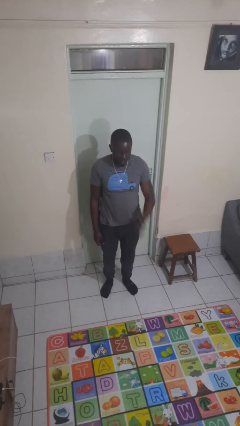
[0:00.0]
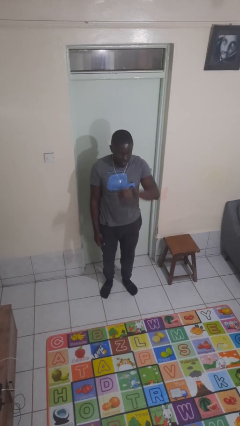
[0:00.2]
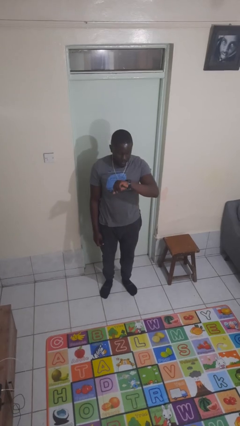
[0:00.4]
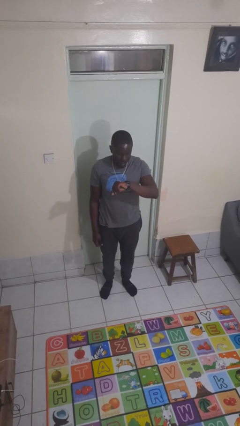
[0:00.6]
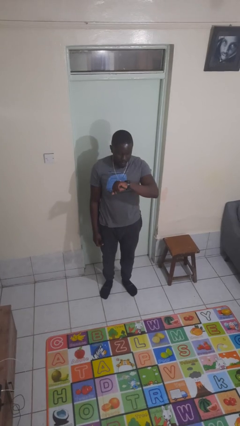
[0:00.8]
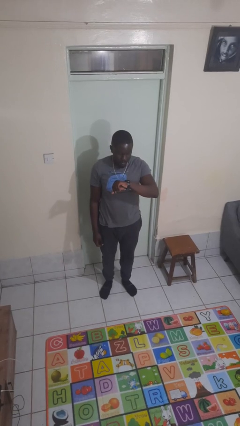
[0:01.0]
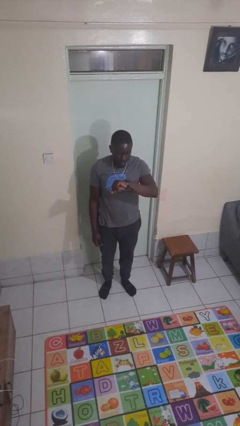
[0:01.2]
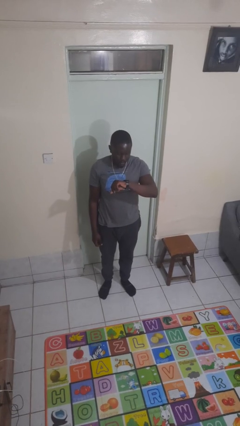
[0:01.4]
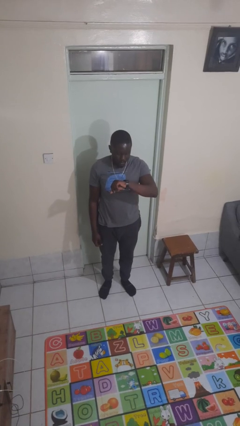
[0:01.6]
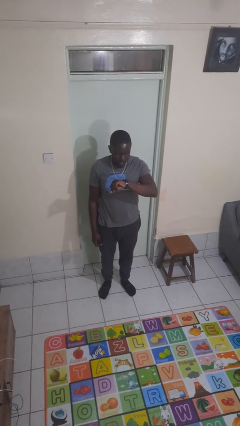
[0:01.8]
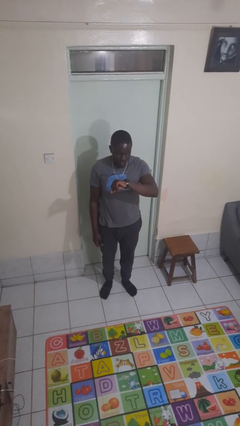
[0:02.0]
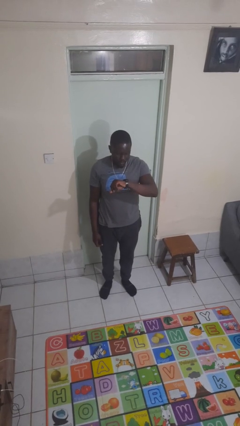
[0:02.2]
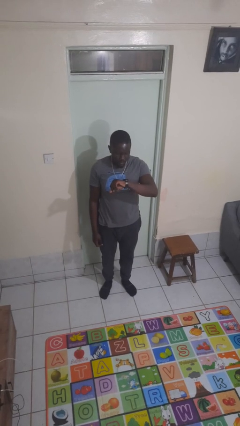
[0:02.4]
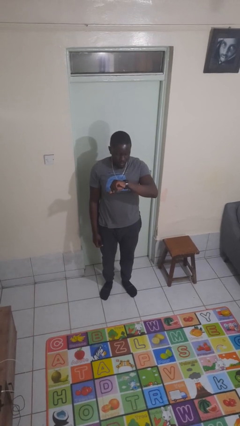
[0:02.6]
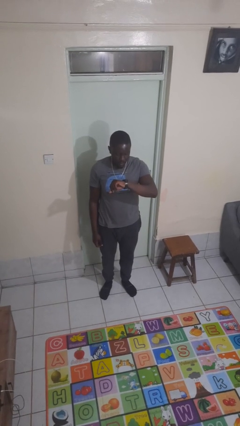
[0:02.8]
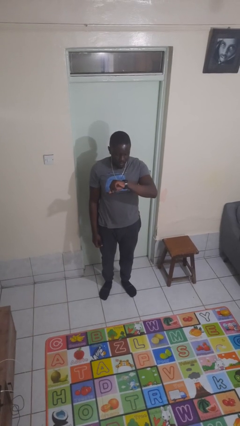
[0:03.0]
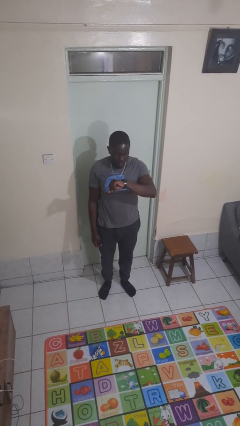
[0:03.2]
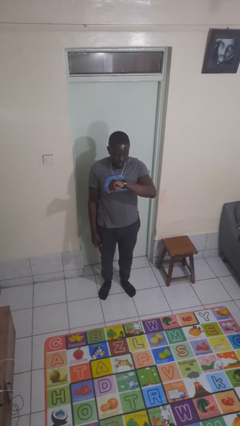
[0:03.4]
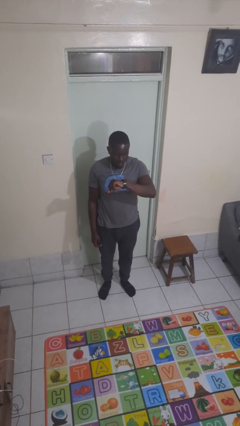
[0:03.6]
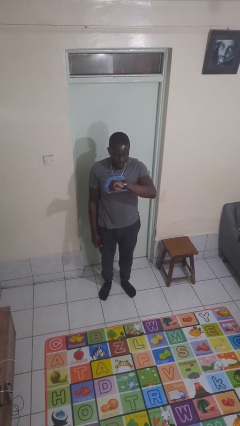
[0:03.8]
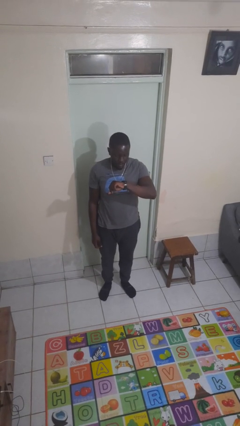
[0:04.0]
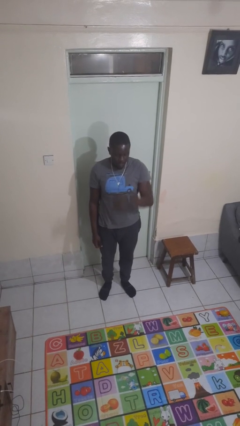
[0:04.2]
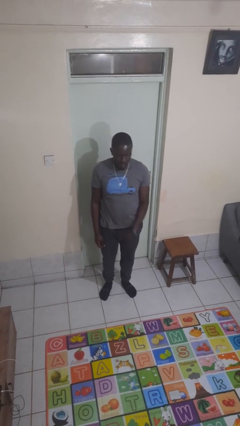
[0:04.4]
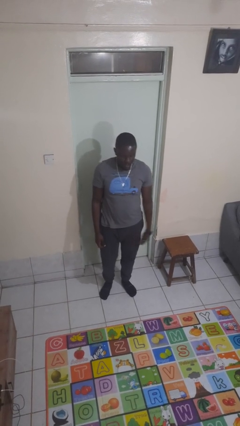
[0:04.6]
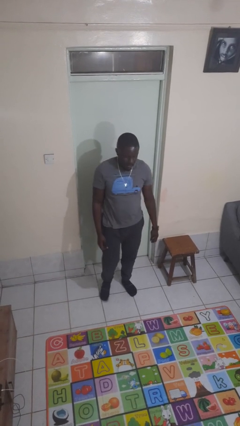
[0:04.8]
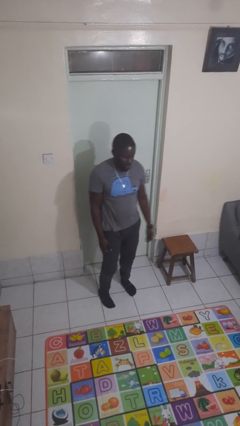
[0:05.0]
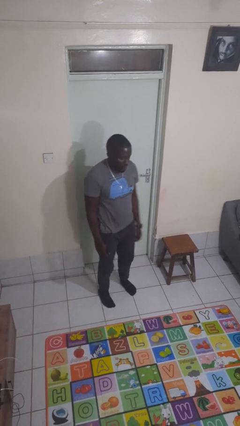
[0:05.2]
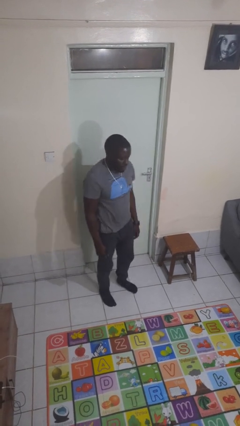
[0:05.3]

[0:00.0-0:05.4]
person looks at wristwatch

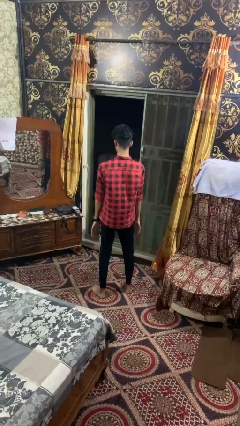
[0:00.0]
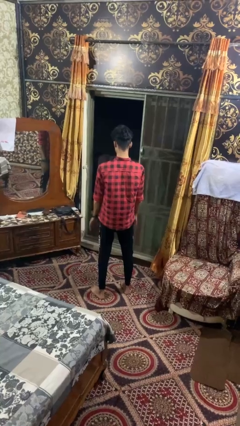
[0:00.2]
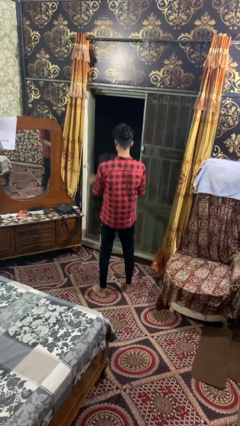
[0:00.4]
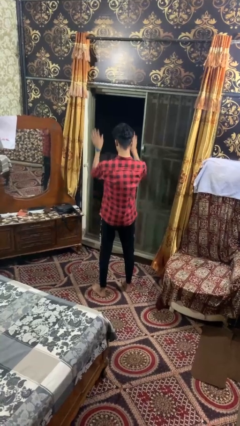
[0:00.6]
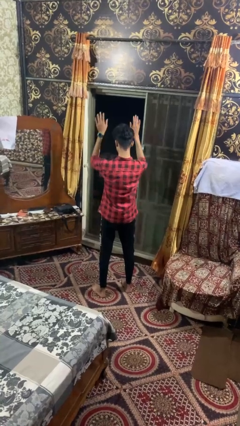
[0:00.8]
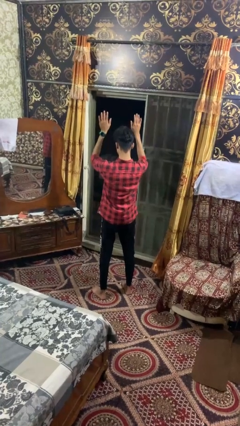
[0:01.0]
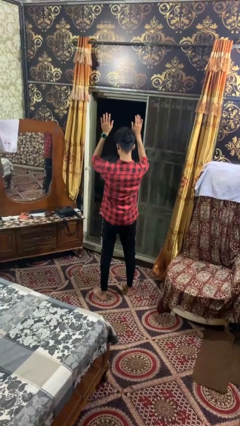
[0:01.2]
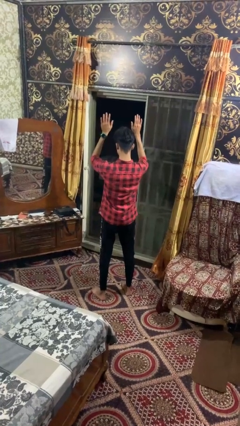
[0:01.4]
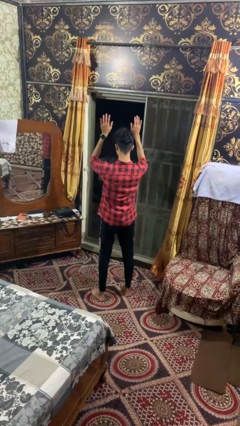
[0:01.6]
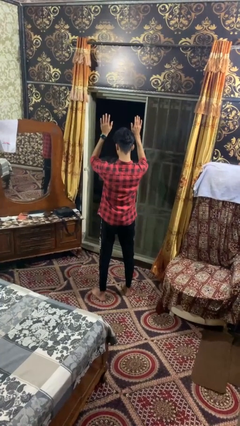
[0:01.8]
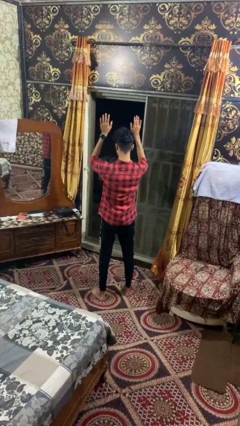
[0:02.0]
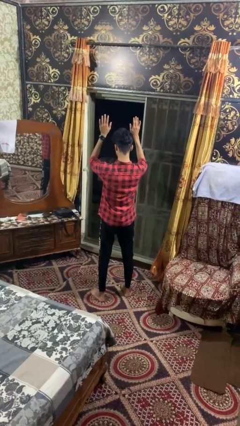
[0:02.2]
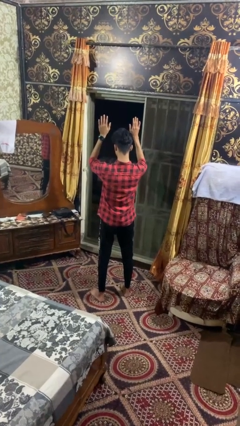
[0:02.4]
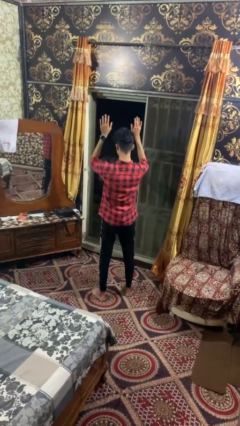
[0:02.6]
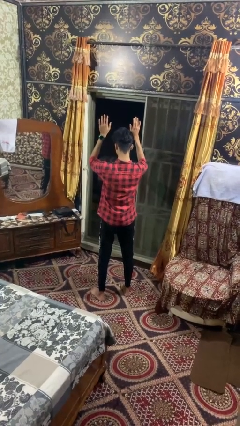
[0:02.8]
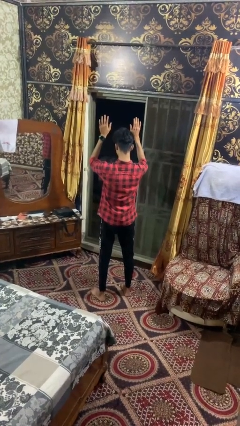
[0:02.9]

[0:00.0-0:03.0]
person gestures swipe up

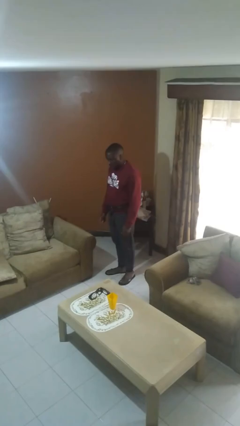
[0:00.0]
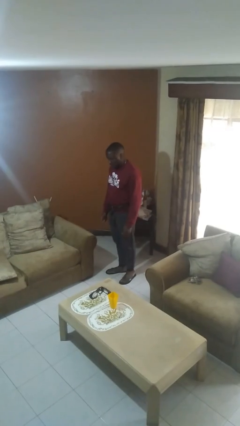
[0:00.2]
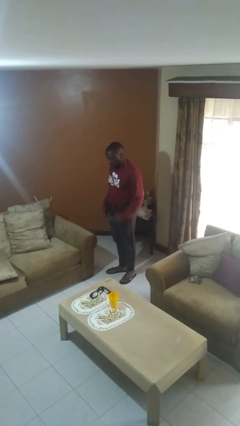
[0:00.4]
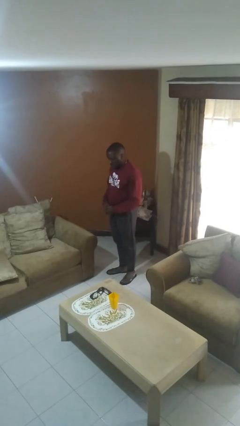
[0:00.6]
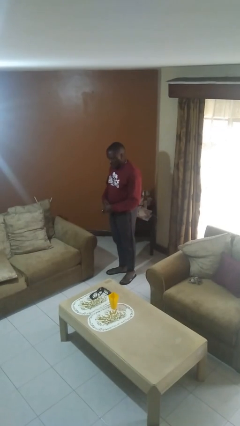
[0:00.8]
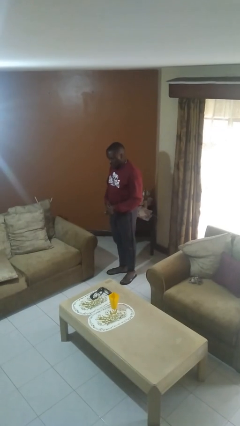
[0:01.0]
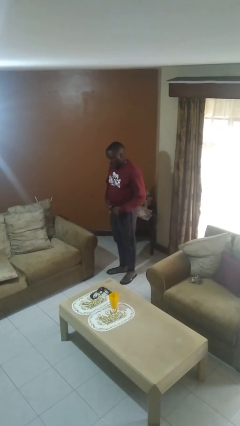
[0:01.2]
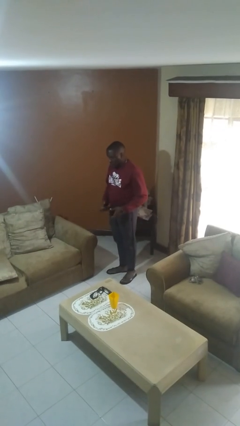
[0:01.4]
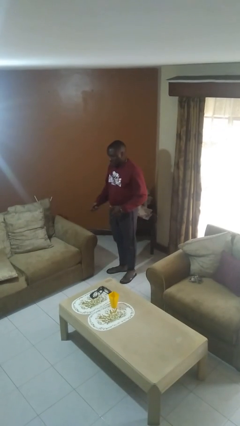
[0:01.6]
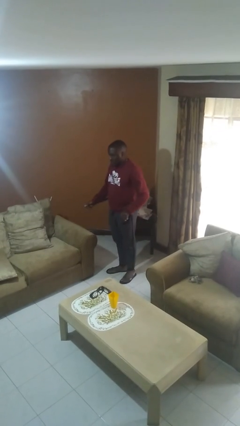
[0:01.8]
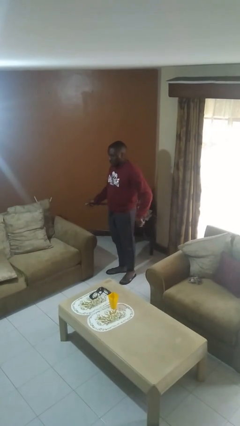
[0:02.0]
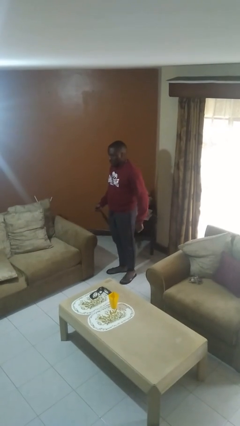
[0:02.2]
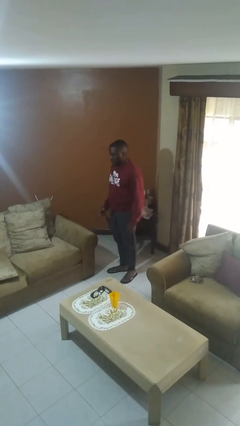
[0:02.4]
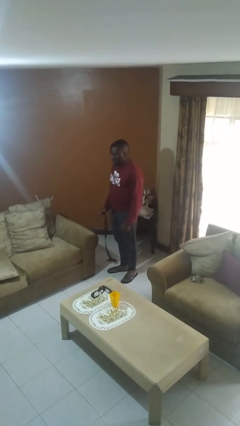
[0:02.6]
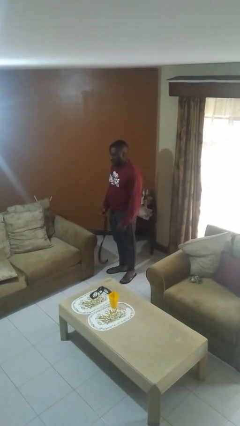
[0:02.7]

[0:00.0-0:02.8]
person takes off belt

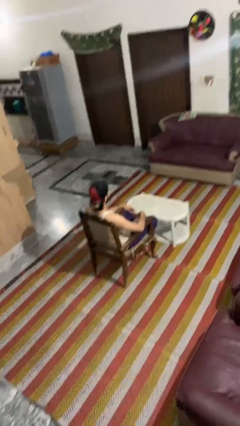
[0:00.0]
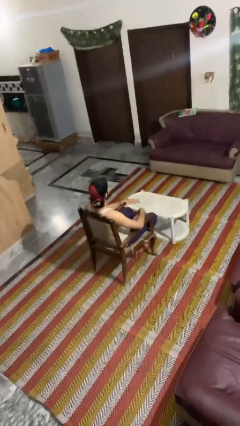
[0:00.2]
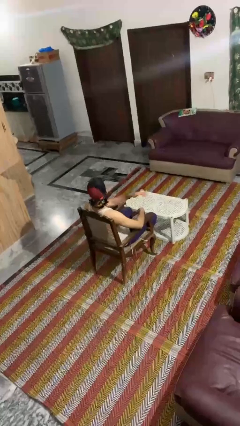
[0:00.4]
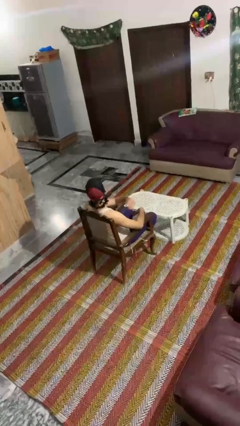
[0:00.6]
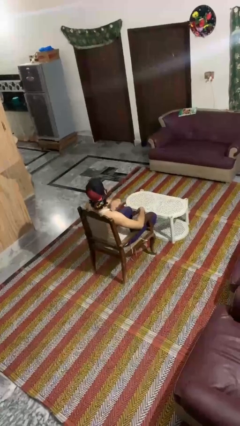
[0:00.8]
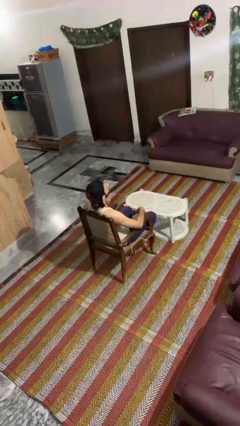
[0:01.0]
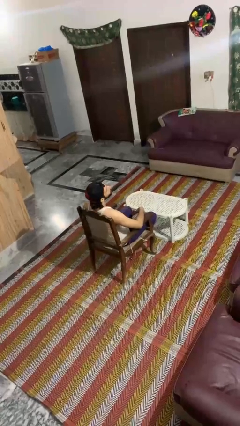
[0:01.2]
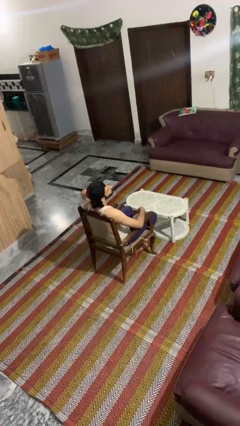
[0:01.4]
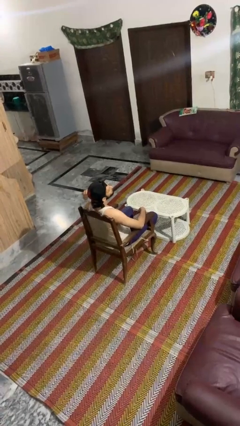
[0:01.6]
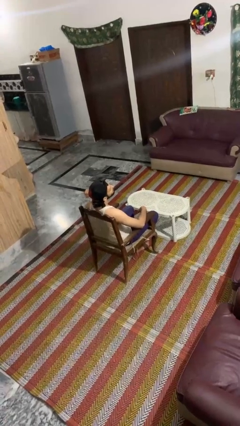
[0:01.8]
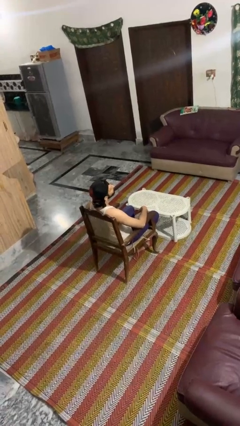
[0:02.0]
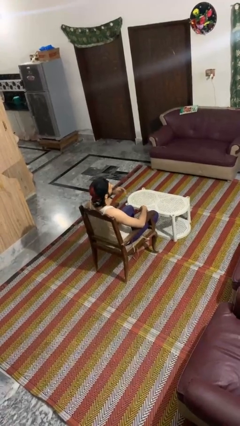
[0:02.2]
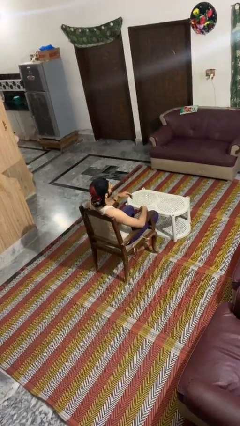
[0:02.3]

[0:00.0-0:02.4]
person gestures cut

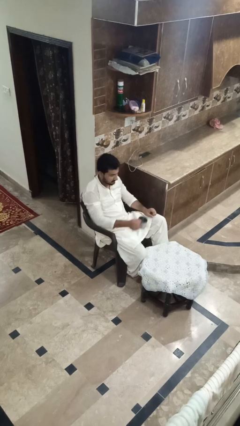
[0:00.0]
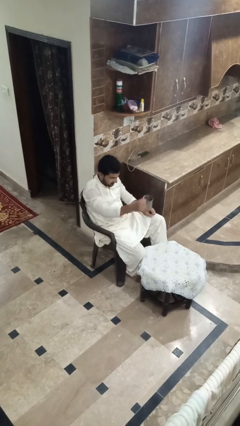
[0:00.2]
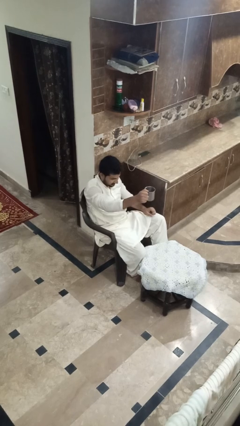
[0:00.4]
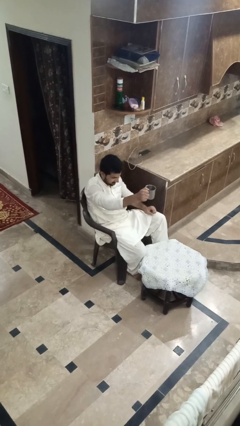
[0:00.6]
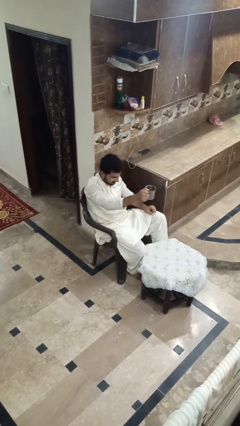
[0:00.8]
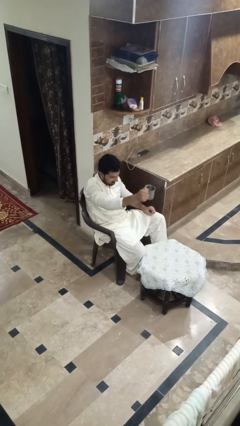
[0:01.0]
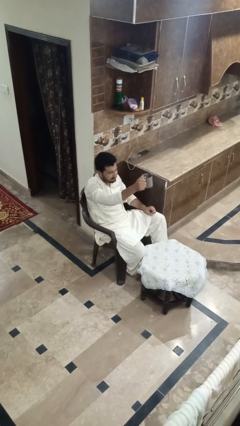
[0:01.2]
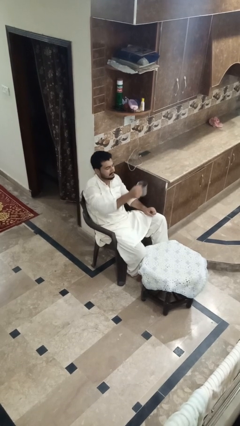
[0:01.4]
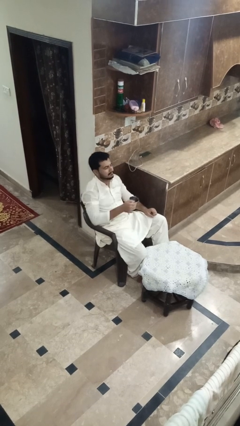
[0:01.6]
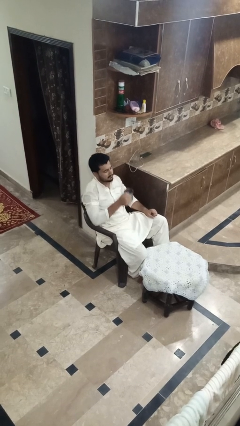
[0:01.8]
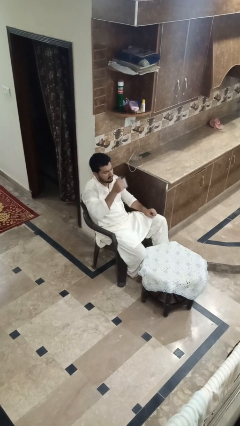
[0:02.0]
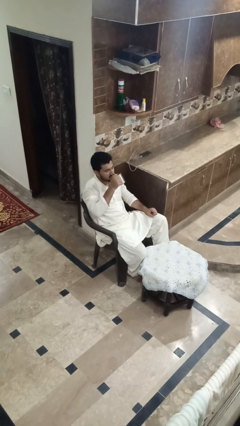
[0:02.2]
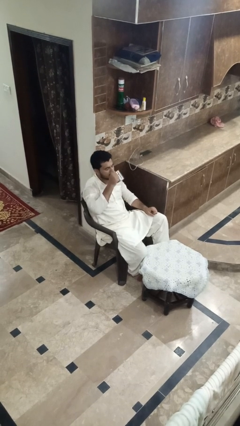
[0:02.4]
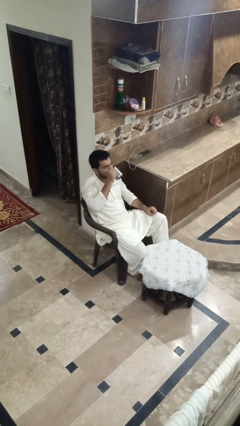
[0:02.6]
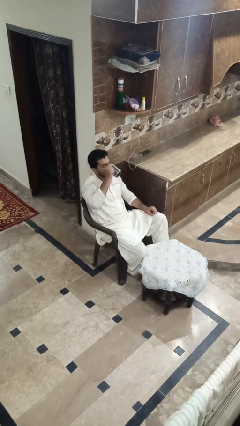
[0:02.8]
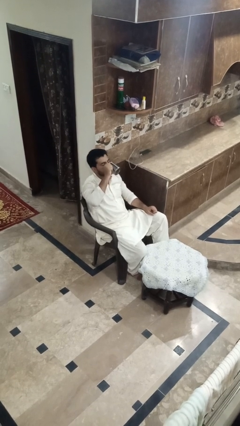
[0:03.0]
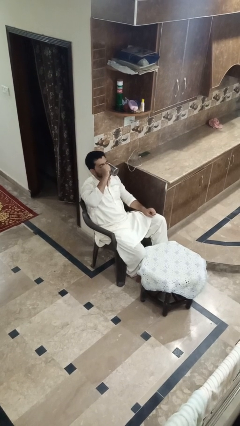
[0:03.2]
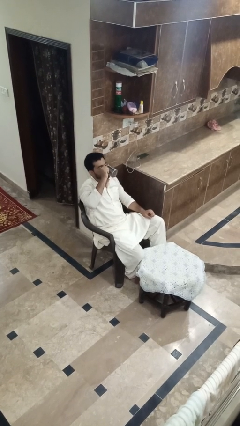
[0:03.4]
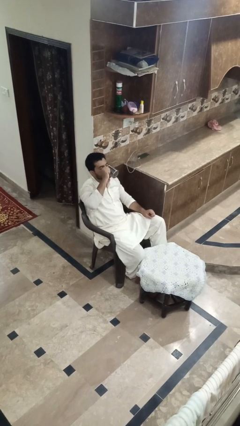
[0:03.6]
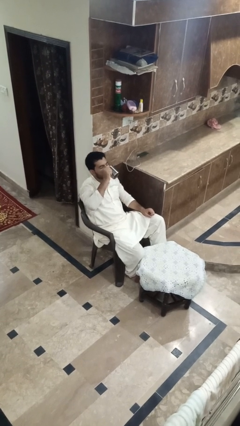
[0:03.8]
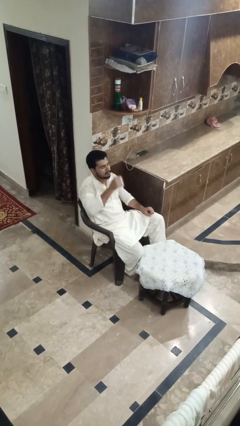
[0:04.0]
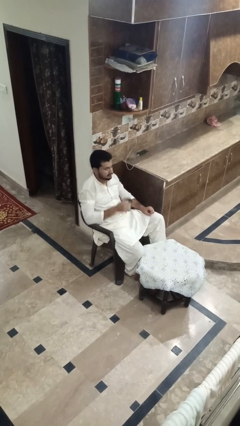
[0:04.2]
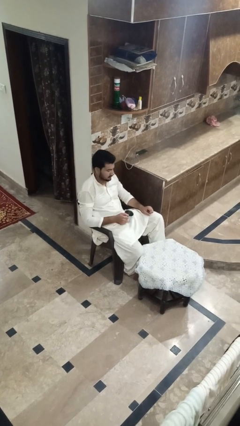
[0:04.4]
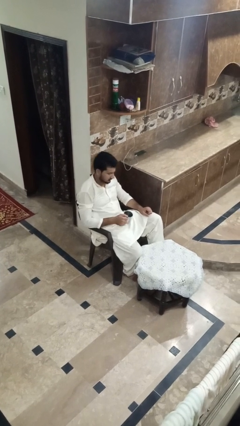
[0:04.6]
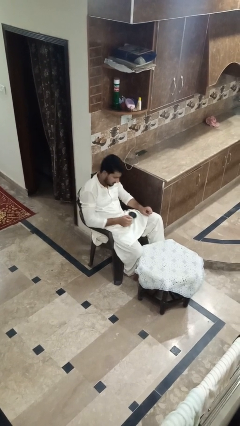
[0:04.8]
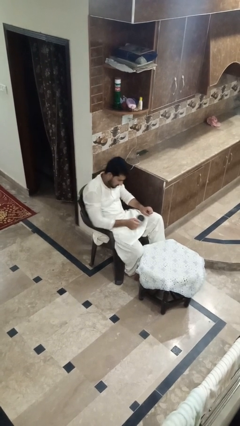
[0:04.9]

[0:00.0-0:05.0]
person drinks from shotglass
